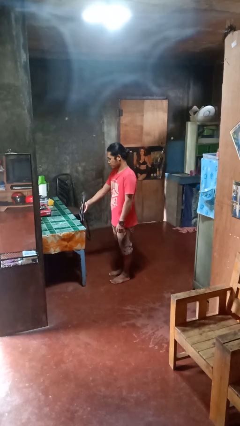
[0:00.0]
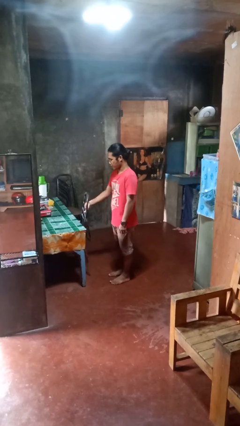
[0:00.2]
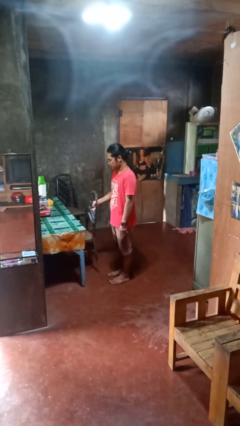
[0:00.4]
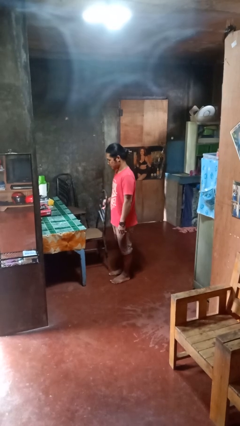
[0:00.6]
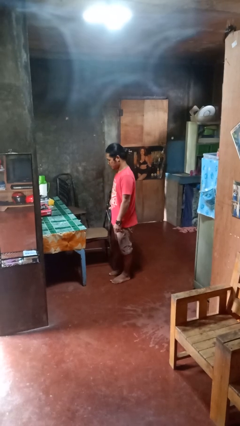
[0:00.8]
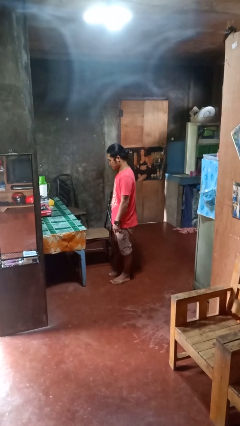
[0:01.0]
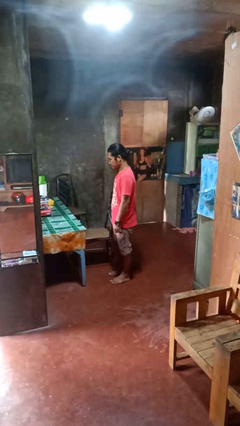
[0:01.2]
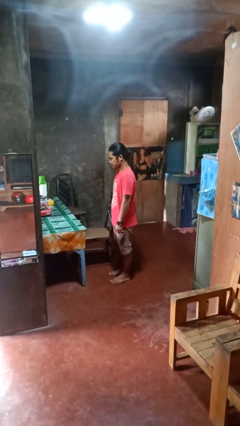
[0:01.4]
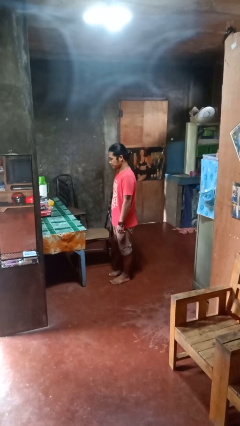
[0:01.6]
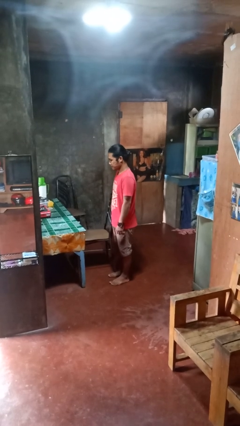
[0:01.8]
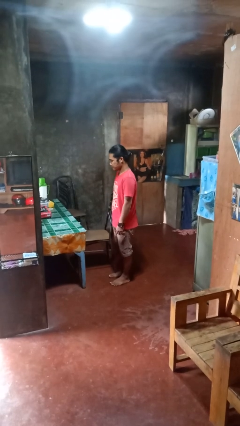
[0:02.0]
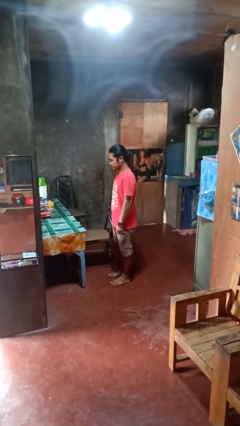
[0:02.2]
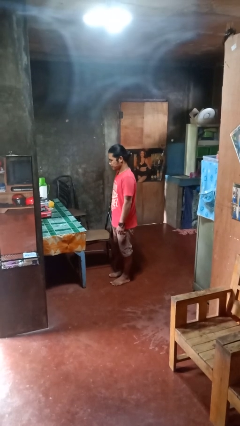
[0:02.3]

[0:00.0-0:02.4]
person pulls out chair

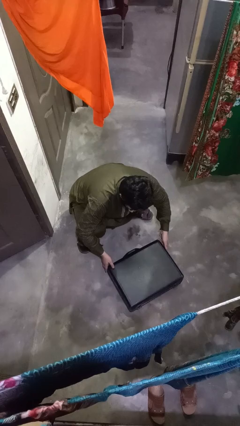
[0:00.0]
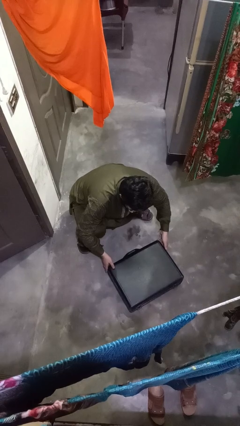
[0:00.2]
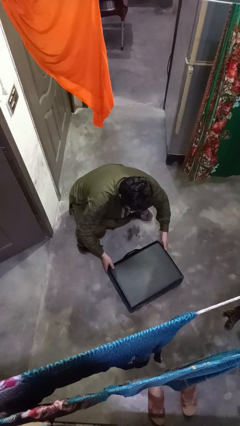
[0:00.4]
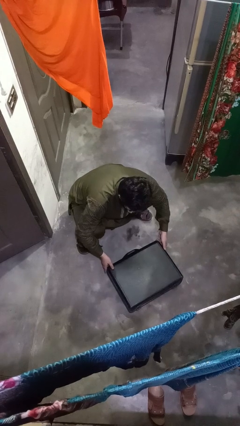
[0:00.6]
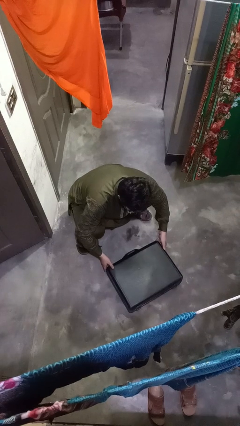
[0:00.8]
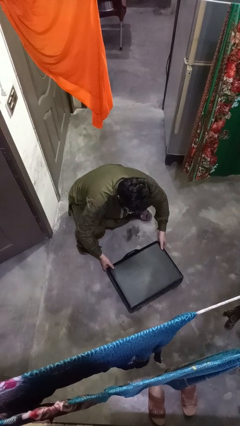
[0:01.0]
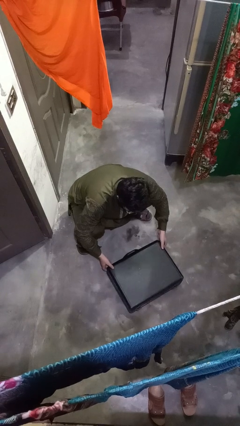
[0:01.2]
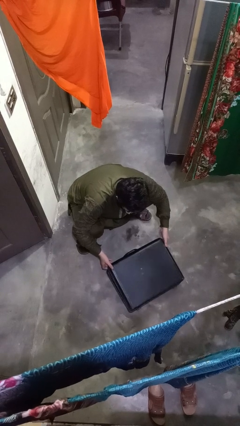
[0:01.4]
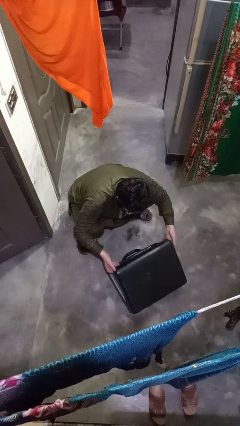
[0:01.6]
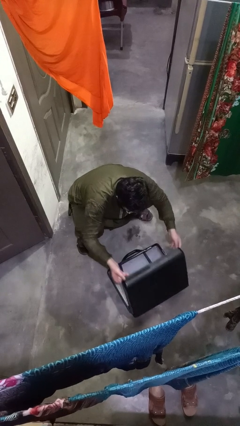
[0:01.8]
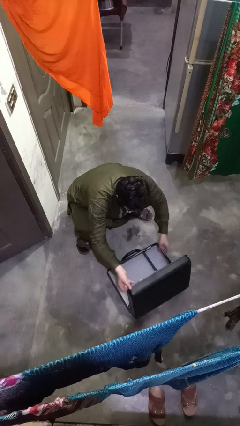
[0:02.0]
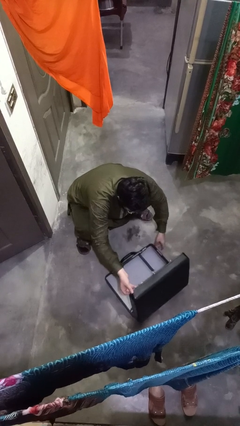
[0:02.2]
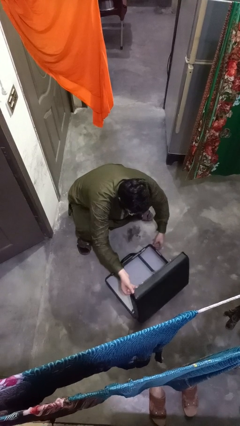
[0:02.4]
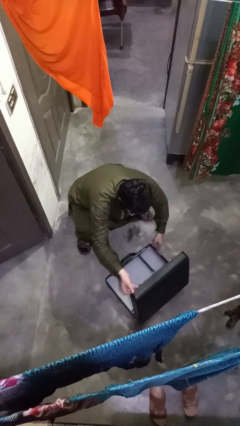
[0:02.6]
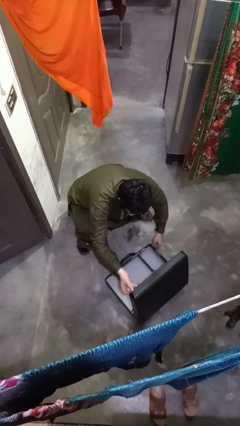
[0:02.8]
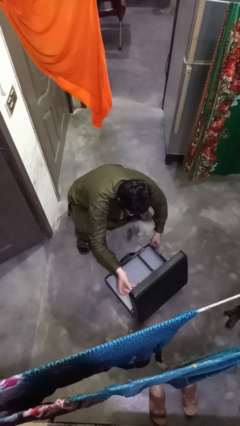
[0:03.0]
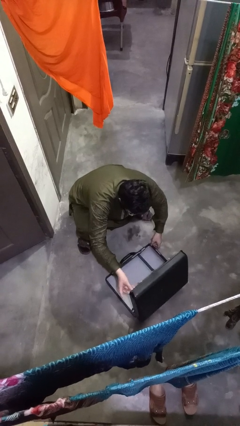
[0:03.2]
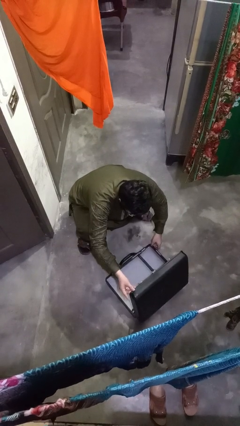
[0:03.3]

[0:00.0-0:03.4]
person opens suitcase

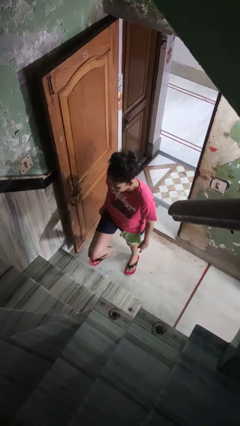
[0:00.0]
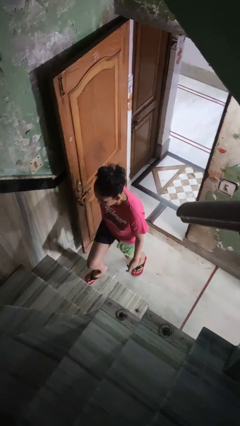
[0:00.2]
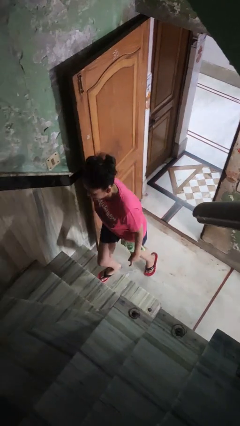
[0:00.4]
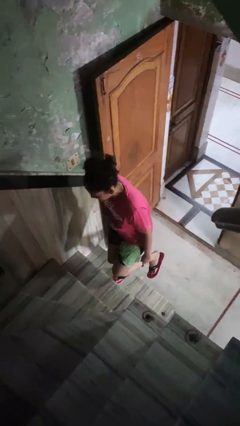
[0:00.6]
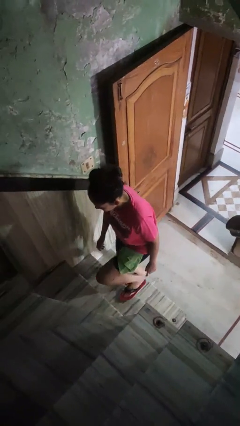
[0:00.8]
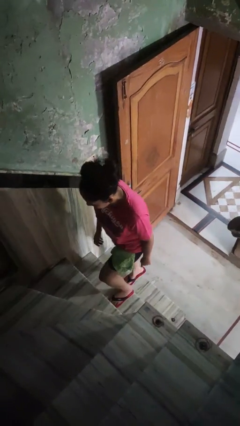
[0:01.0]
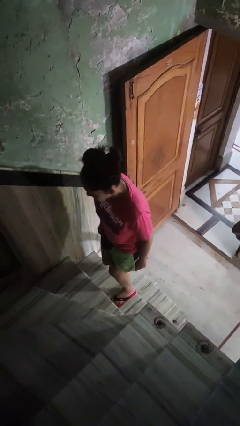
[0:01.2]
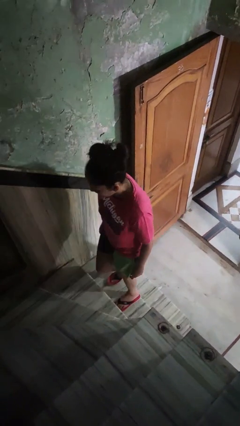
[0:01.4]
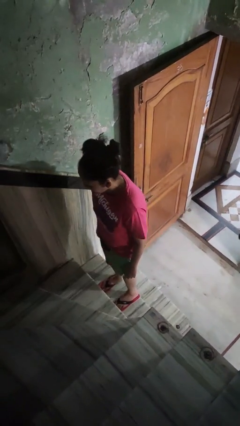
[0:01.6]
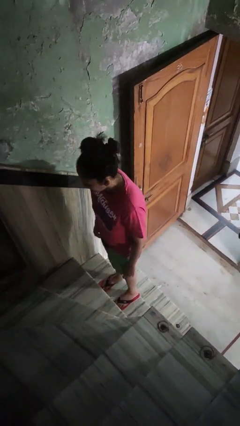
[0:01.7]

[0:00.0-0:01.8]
person climbs up stairs

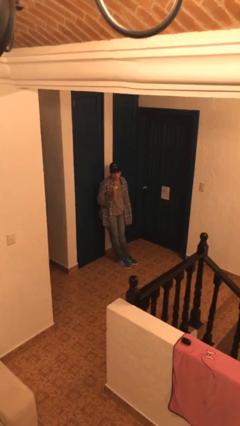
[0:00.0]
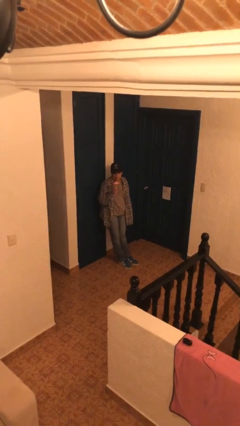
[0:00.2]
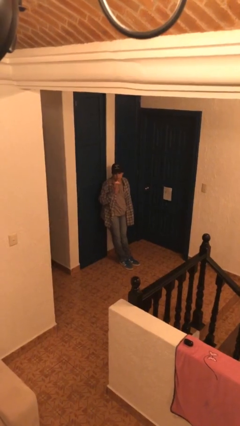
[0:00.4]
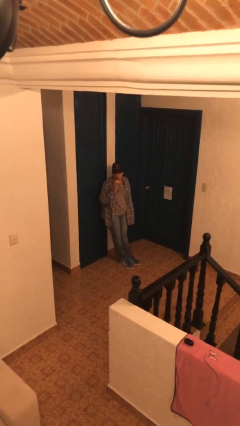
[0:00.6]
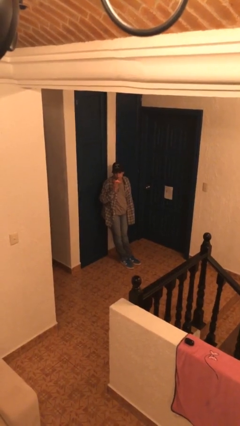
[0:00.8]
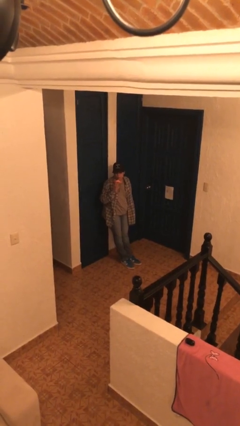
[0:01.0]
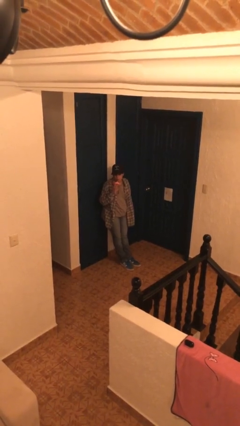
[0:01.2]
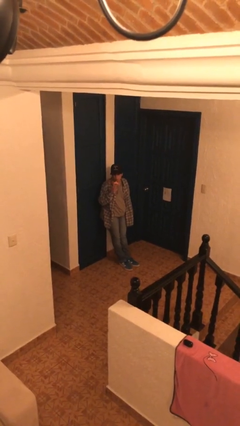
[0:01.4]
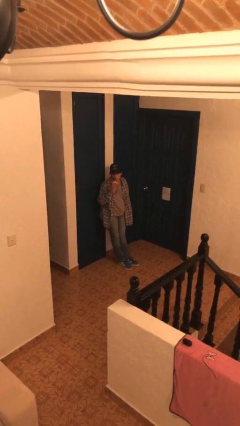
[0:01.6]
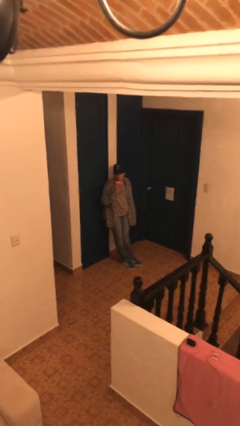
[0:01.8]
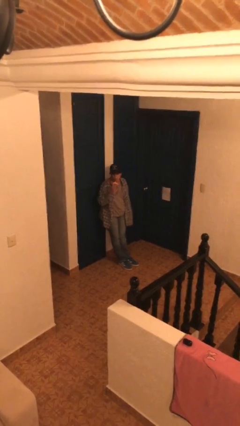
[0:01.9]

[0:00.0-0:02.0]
person drinks from straw

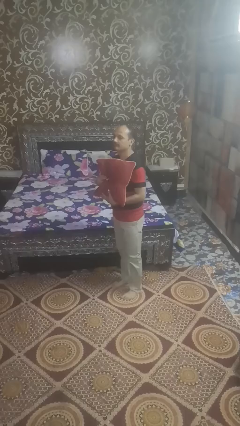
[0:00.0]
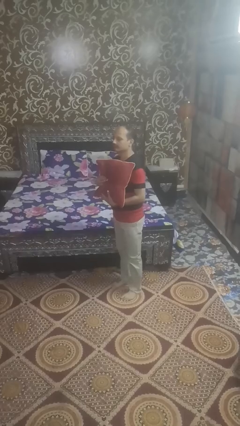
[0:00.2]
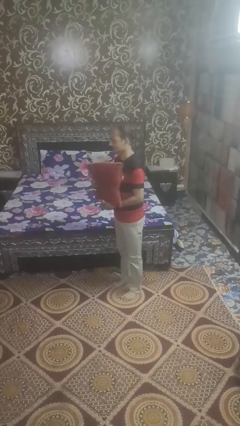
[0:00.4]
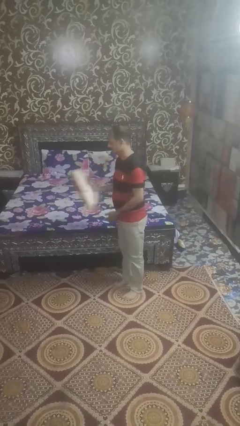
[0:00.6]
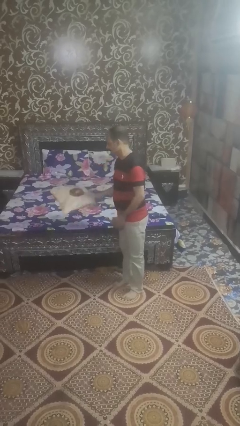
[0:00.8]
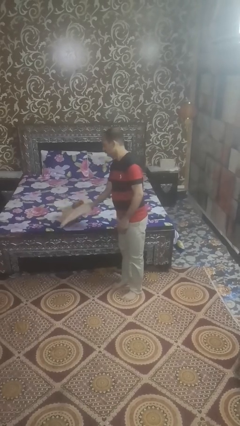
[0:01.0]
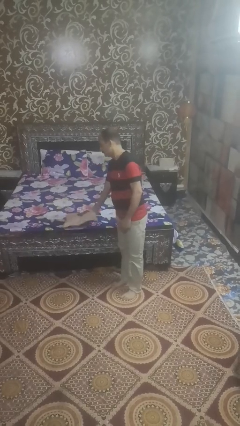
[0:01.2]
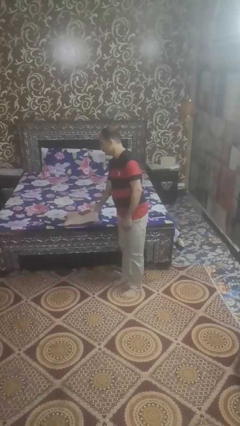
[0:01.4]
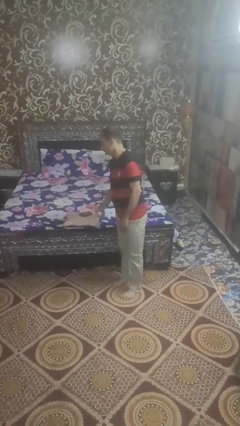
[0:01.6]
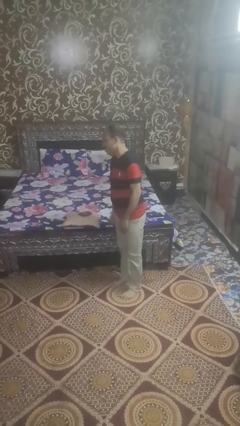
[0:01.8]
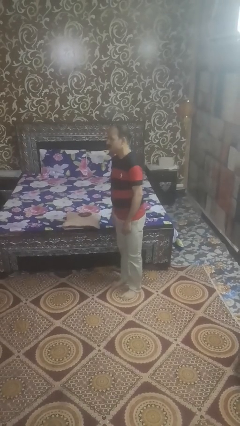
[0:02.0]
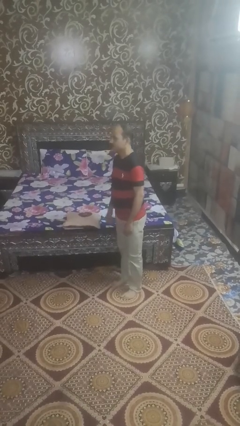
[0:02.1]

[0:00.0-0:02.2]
person puts down object on bed

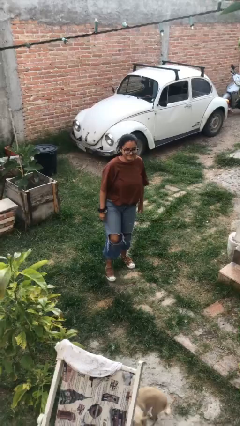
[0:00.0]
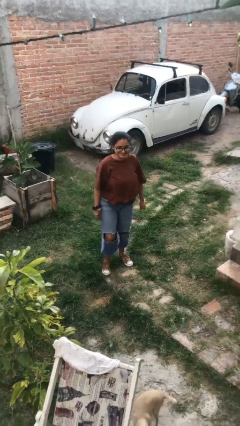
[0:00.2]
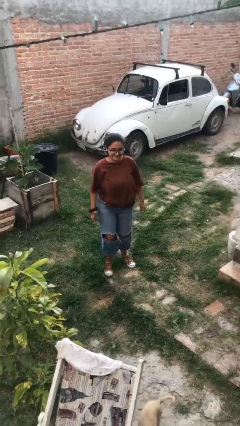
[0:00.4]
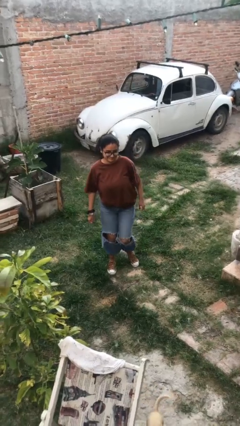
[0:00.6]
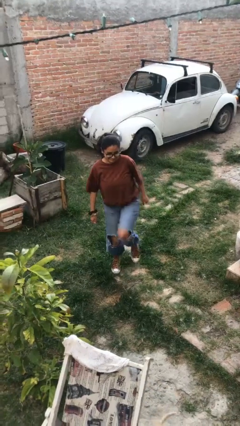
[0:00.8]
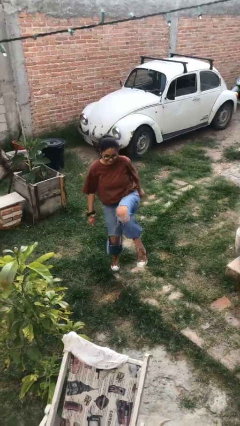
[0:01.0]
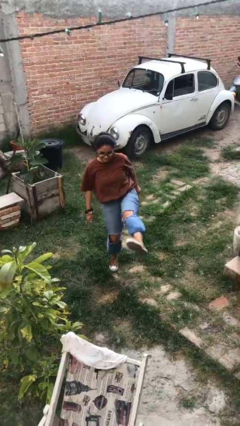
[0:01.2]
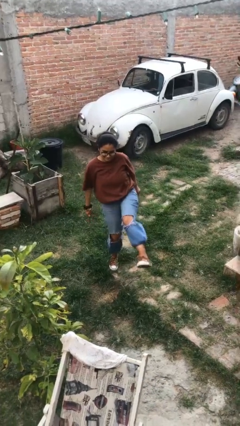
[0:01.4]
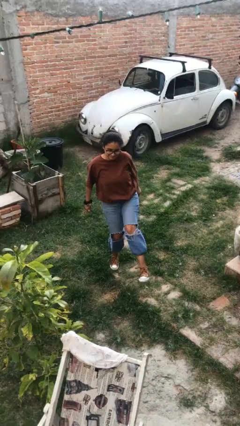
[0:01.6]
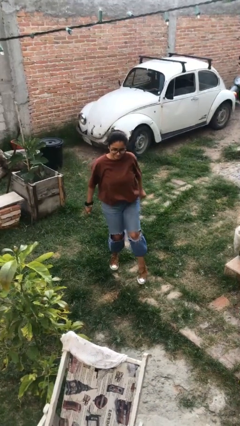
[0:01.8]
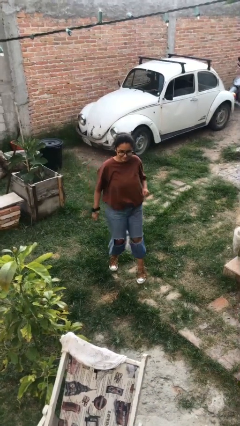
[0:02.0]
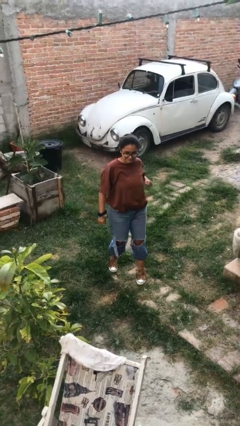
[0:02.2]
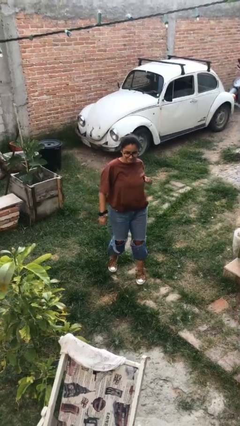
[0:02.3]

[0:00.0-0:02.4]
person karate kicks

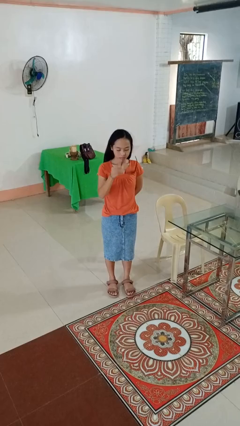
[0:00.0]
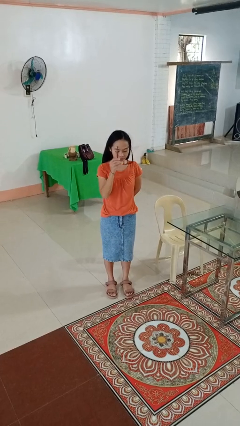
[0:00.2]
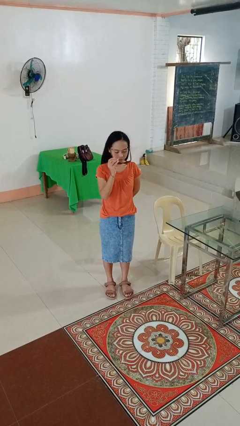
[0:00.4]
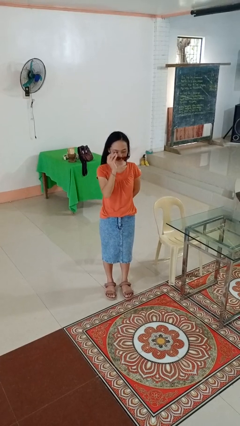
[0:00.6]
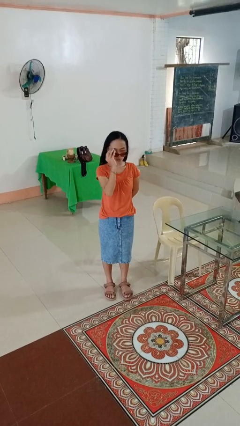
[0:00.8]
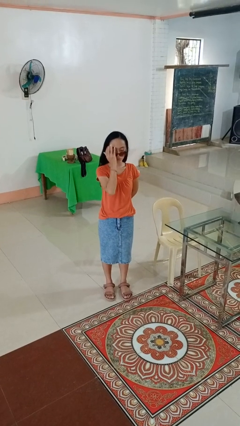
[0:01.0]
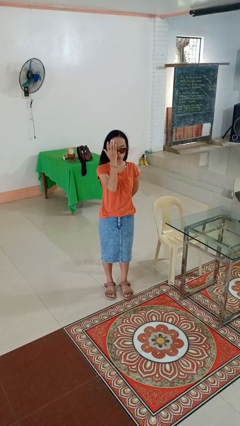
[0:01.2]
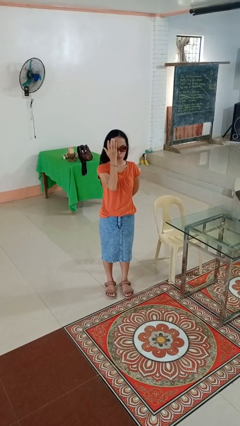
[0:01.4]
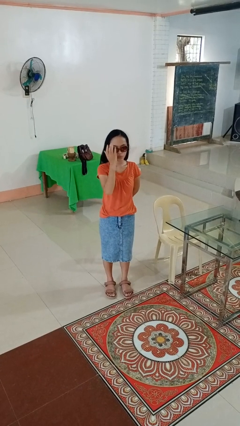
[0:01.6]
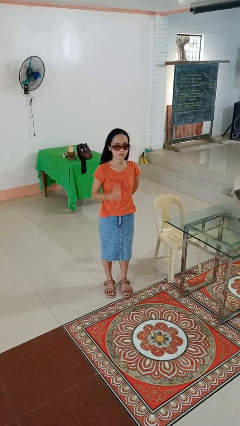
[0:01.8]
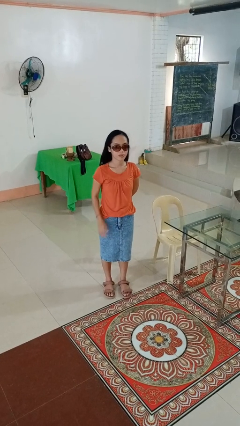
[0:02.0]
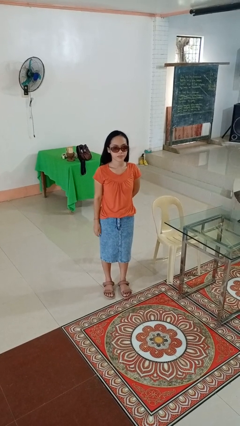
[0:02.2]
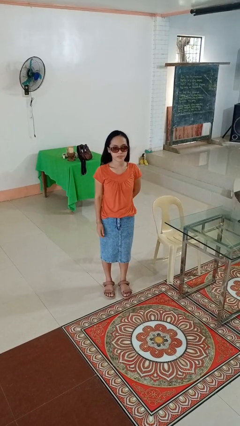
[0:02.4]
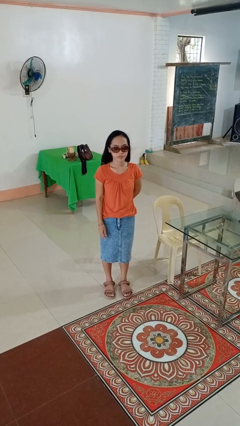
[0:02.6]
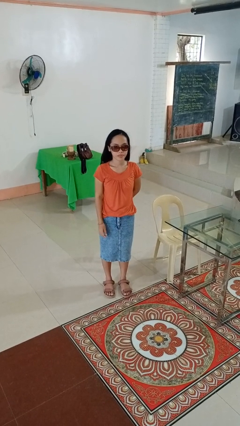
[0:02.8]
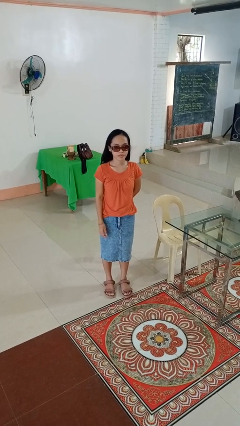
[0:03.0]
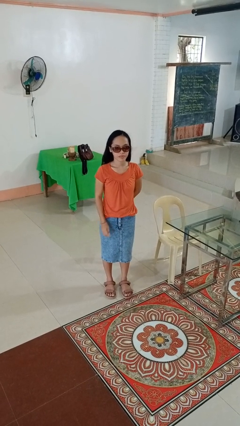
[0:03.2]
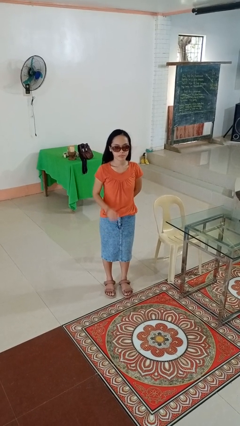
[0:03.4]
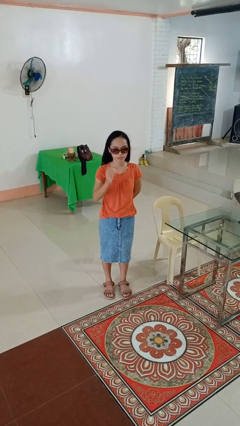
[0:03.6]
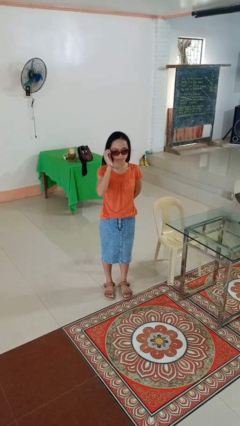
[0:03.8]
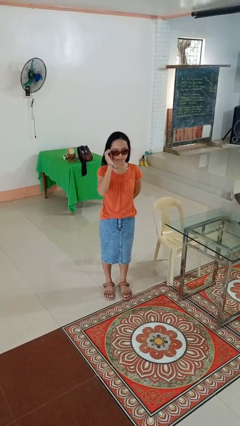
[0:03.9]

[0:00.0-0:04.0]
person puts on sunglasses
